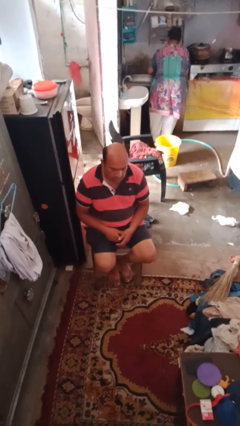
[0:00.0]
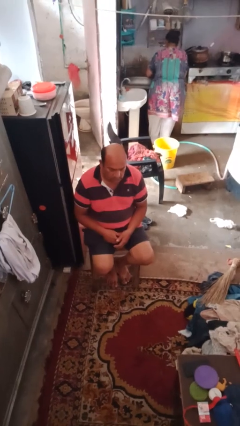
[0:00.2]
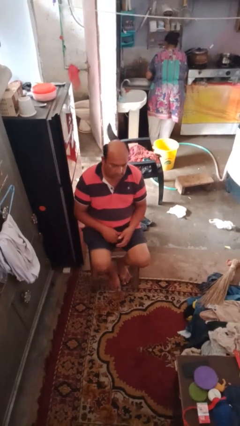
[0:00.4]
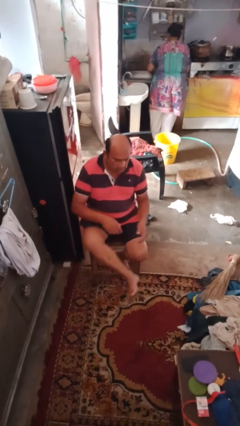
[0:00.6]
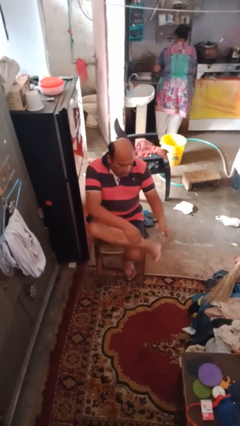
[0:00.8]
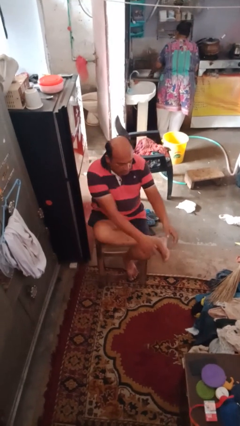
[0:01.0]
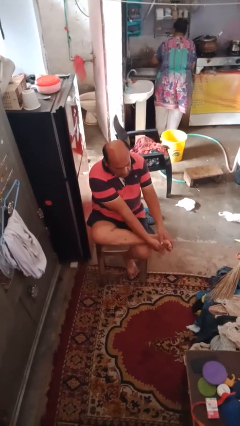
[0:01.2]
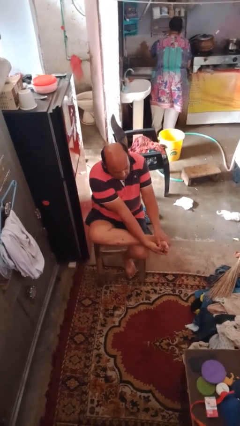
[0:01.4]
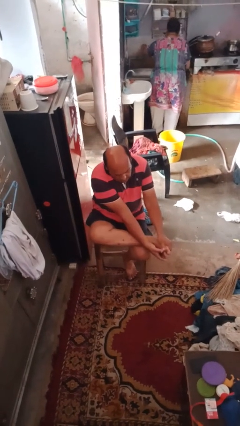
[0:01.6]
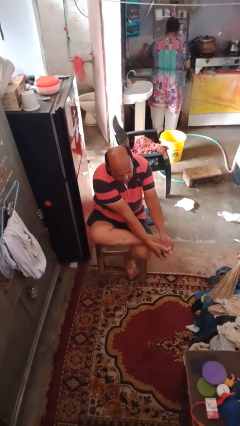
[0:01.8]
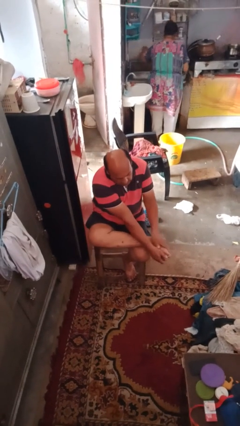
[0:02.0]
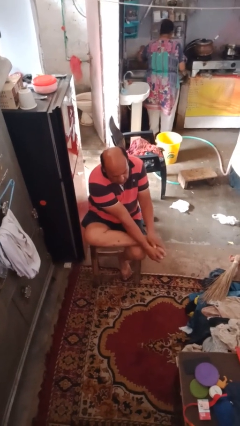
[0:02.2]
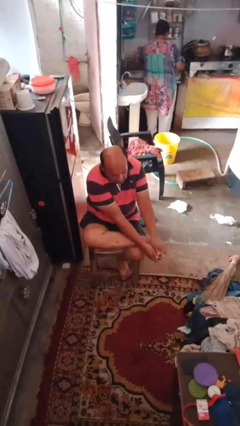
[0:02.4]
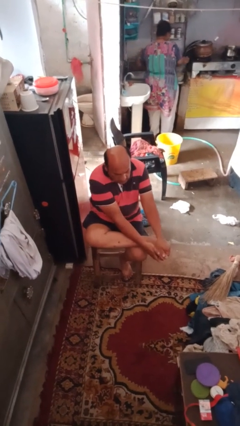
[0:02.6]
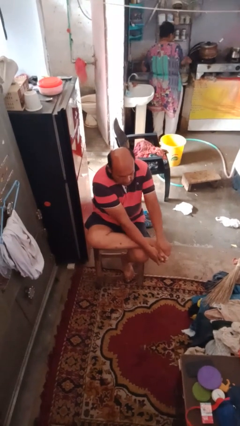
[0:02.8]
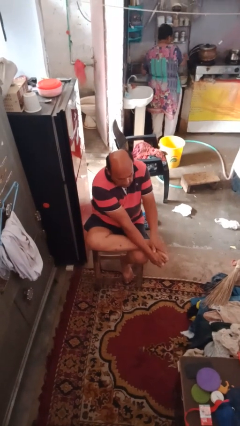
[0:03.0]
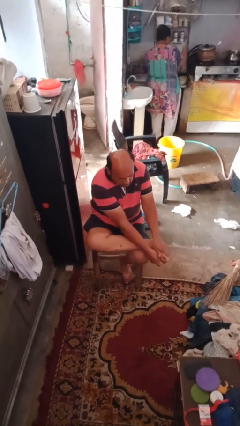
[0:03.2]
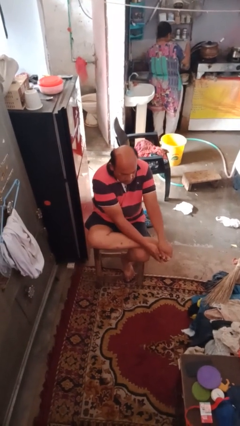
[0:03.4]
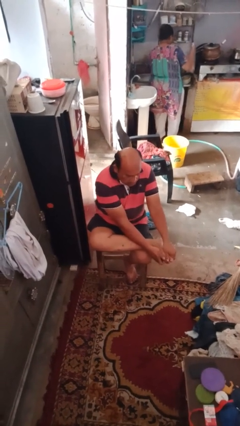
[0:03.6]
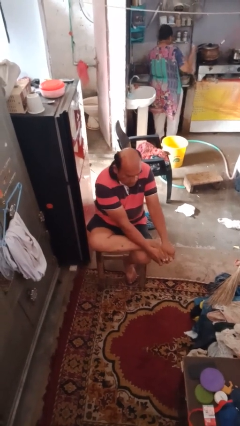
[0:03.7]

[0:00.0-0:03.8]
person rubs foot

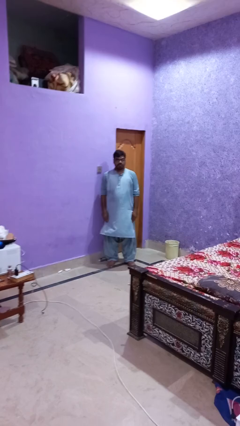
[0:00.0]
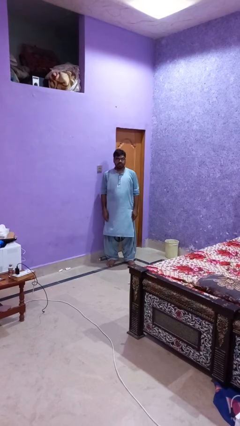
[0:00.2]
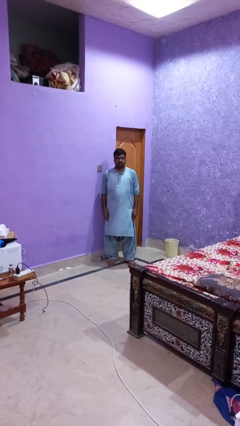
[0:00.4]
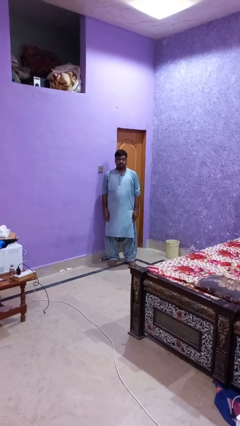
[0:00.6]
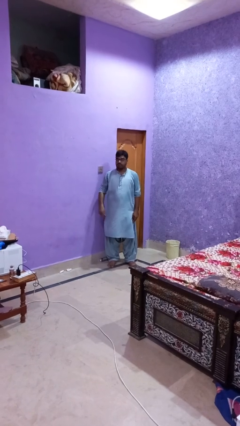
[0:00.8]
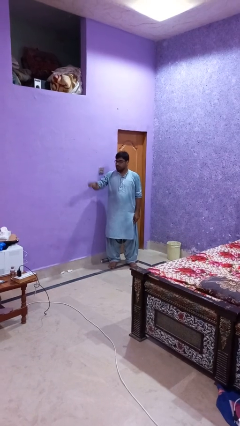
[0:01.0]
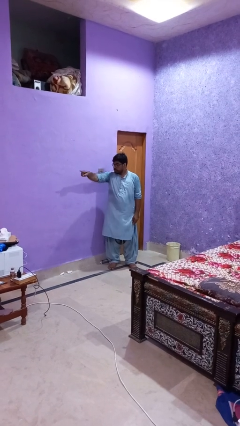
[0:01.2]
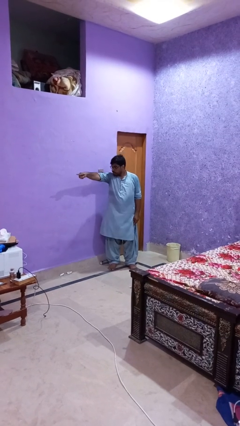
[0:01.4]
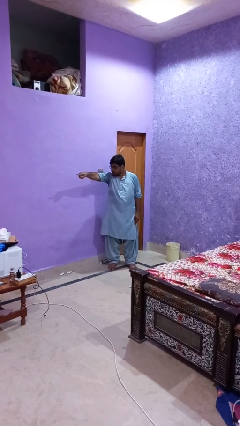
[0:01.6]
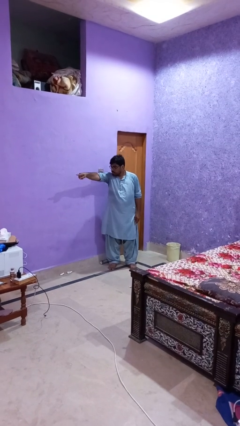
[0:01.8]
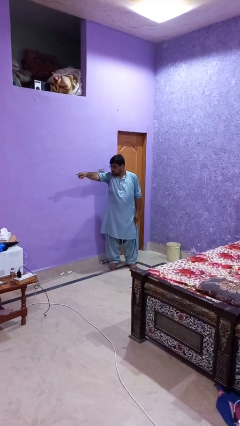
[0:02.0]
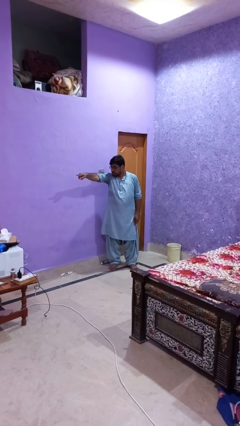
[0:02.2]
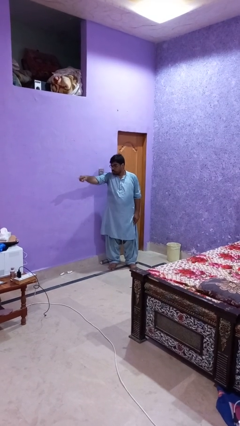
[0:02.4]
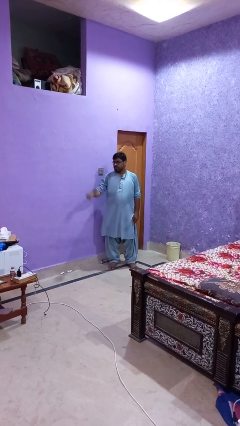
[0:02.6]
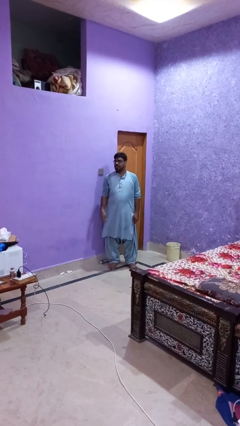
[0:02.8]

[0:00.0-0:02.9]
person points at person

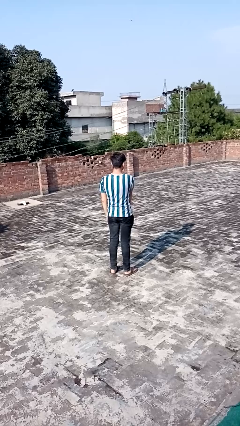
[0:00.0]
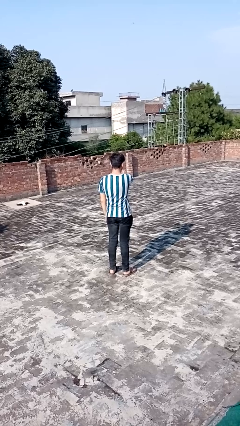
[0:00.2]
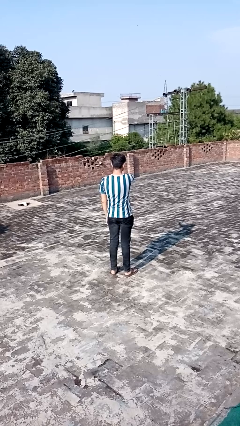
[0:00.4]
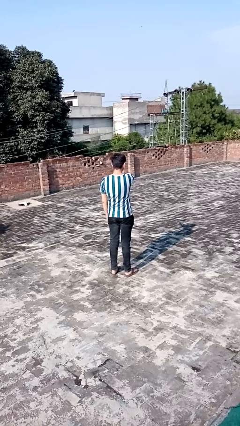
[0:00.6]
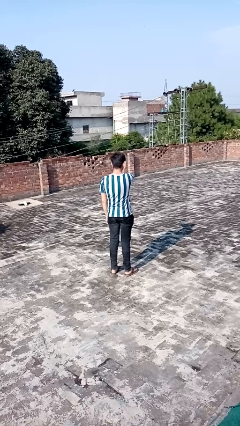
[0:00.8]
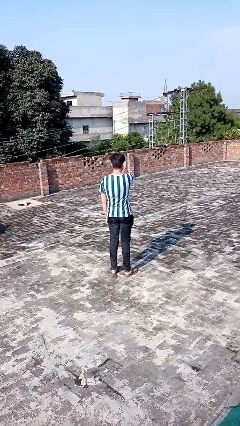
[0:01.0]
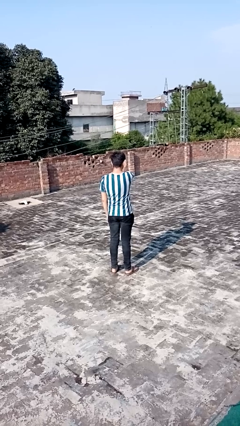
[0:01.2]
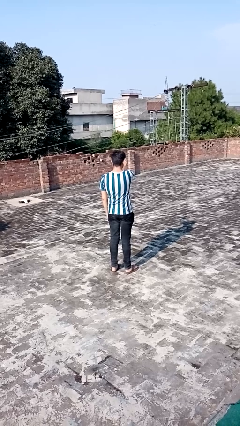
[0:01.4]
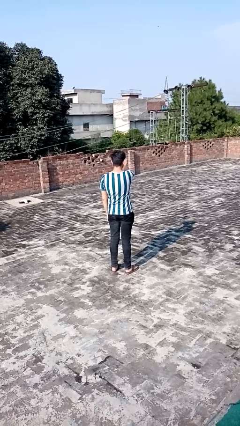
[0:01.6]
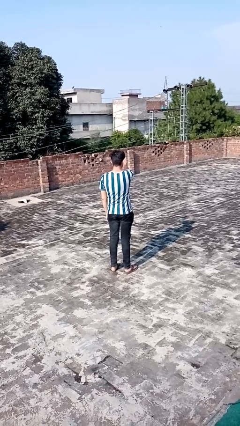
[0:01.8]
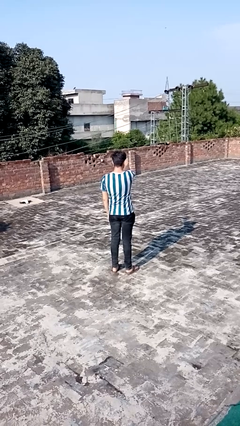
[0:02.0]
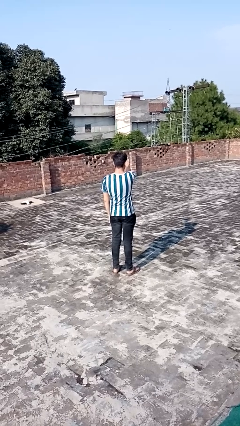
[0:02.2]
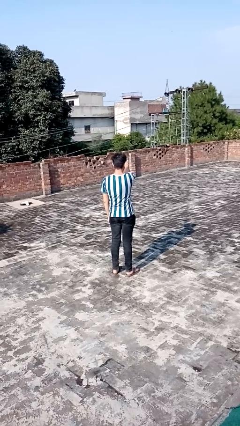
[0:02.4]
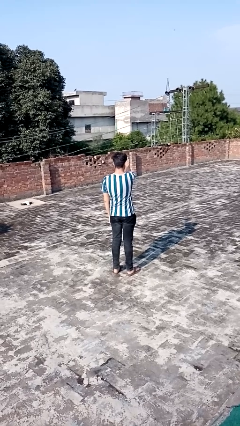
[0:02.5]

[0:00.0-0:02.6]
person gestures stop

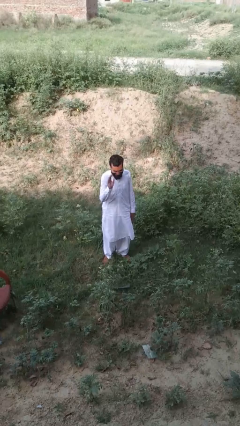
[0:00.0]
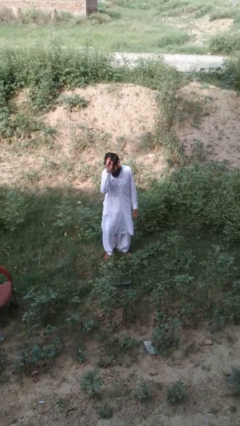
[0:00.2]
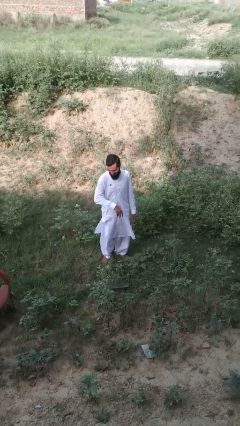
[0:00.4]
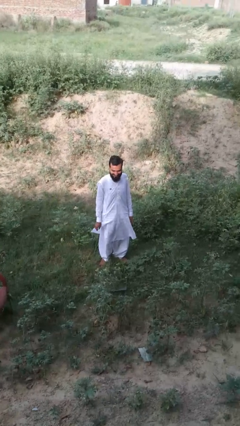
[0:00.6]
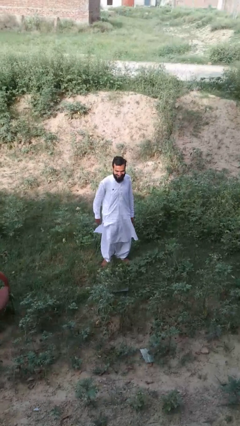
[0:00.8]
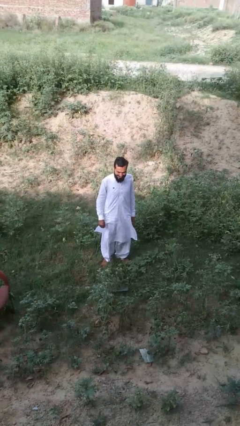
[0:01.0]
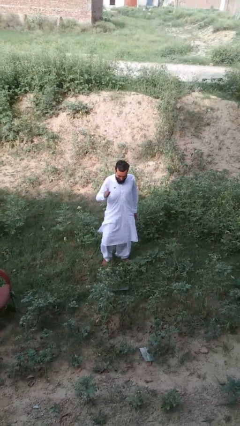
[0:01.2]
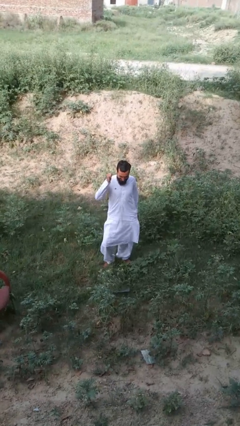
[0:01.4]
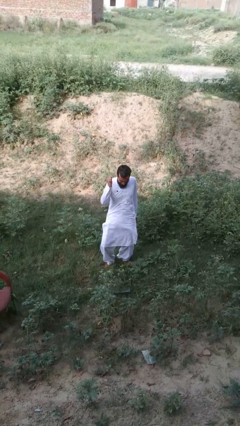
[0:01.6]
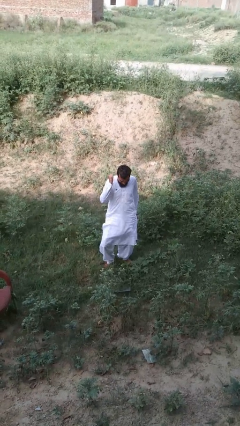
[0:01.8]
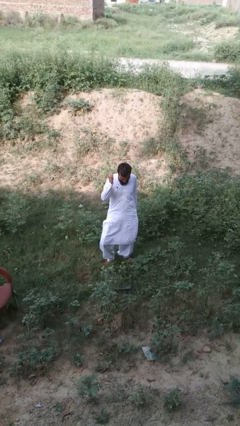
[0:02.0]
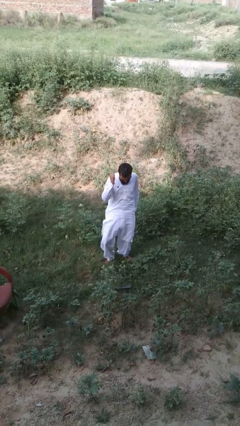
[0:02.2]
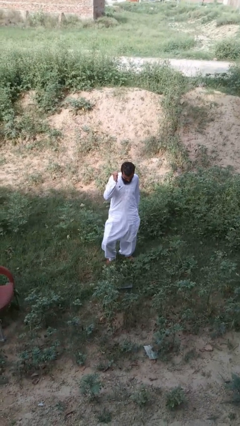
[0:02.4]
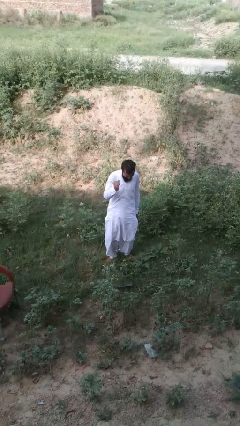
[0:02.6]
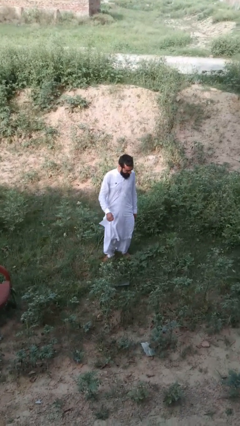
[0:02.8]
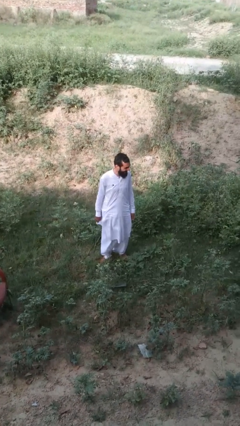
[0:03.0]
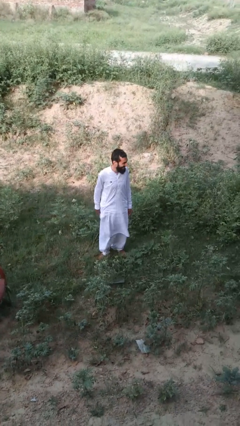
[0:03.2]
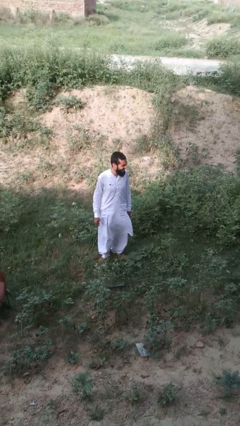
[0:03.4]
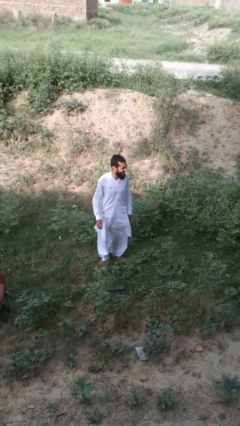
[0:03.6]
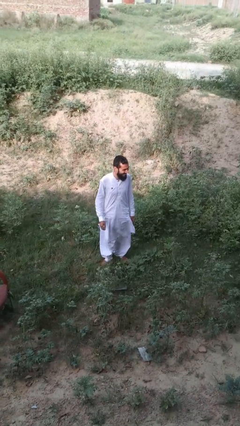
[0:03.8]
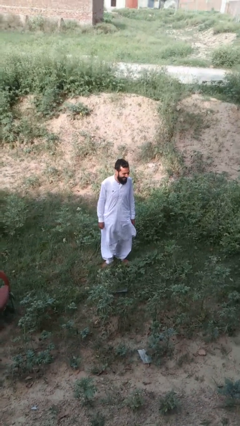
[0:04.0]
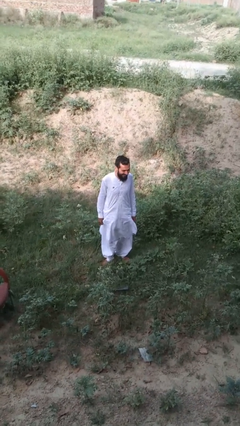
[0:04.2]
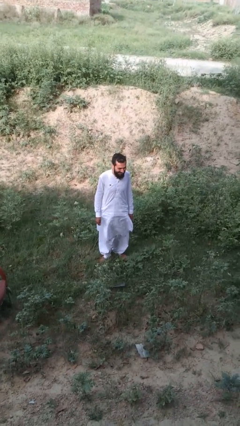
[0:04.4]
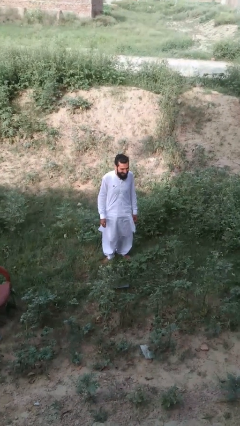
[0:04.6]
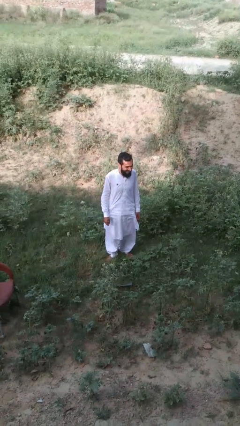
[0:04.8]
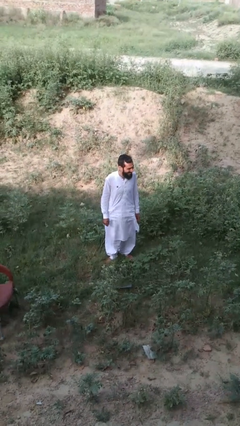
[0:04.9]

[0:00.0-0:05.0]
person dances in place

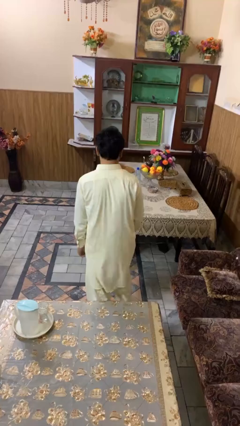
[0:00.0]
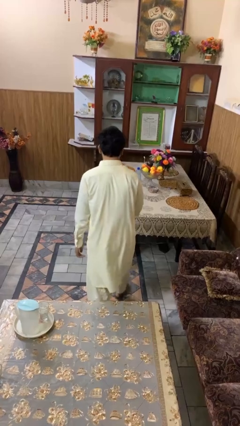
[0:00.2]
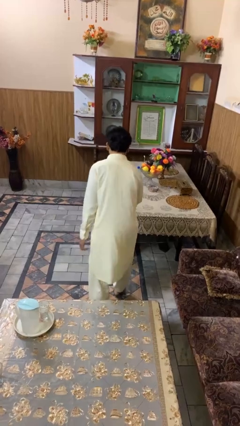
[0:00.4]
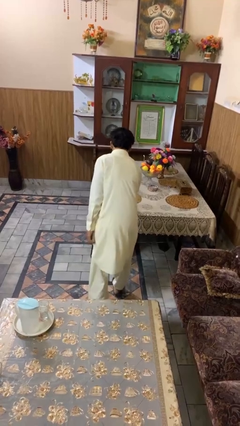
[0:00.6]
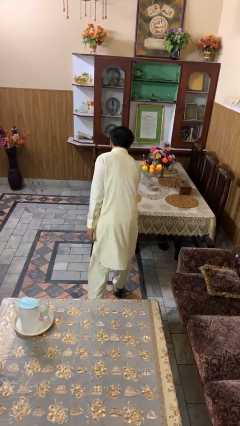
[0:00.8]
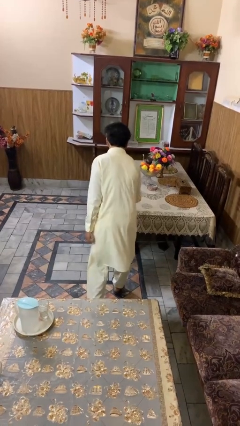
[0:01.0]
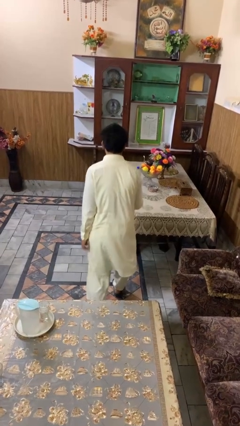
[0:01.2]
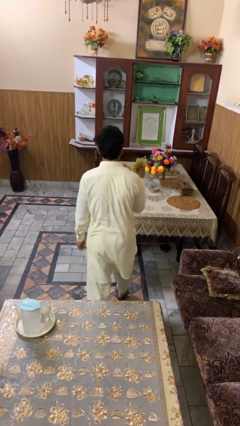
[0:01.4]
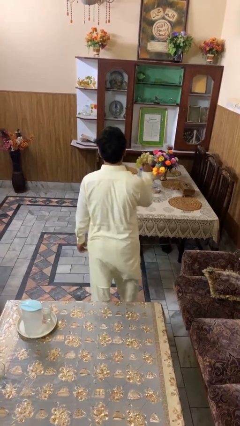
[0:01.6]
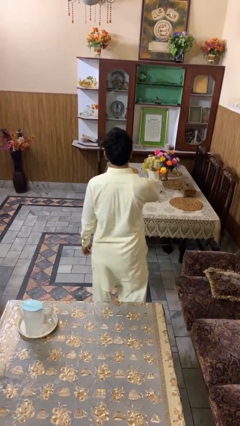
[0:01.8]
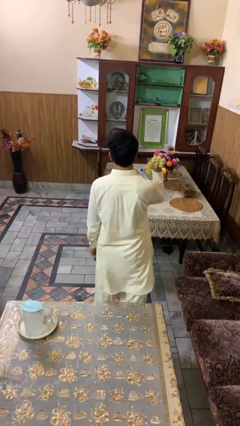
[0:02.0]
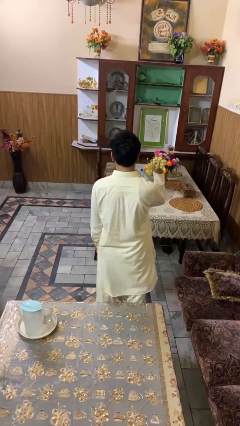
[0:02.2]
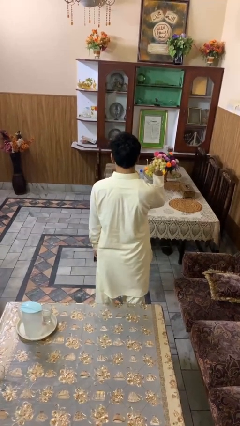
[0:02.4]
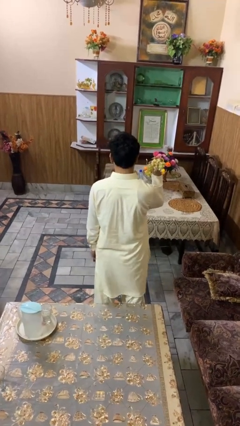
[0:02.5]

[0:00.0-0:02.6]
person picks up object from table

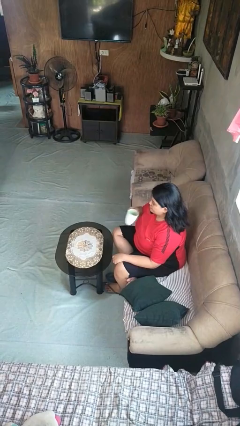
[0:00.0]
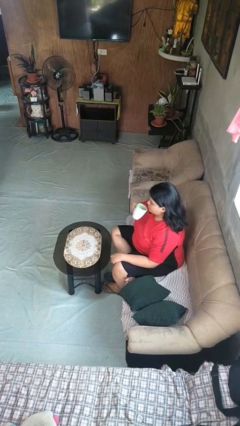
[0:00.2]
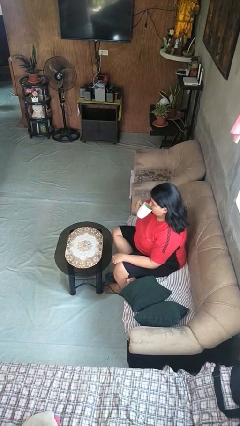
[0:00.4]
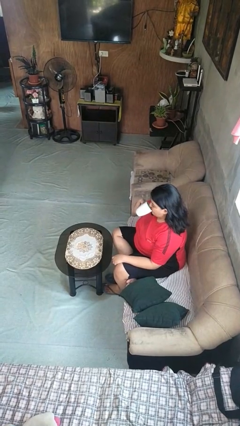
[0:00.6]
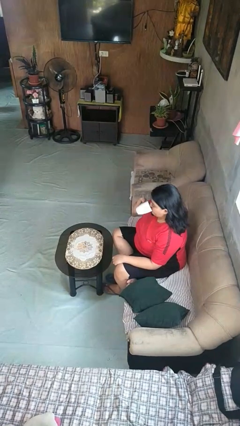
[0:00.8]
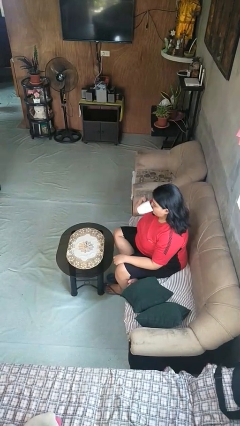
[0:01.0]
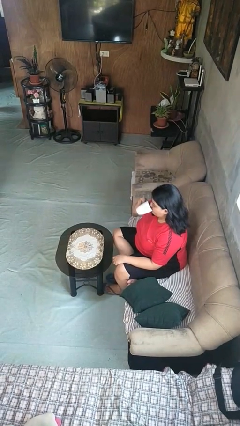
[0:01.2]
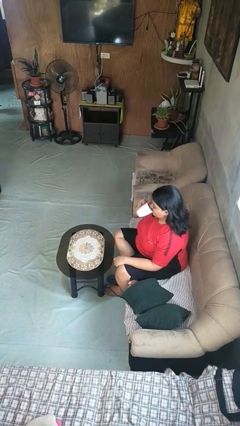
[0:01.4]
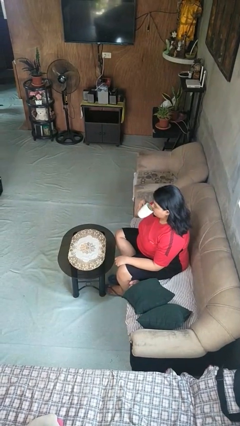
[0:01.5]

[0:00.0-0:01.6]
person drinks from mug
